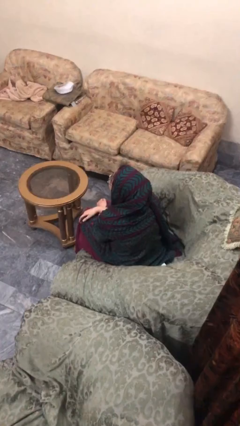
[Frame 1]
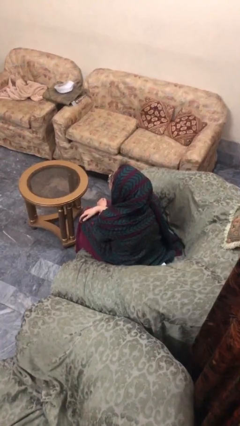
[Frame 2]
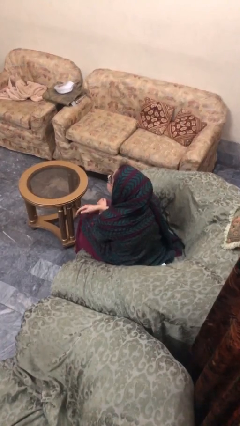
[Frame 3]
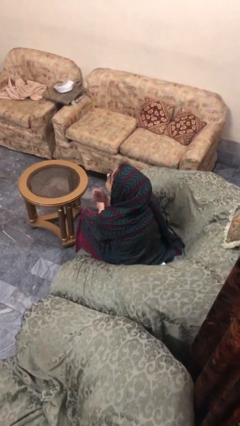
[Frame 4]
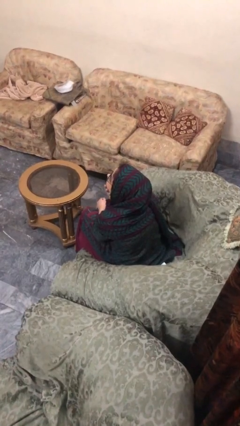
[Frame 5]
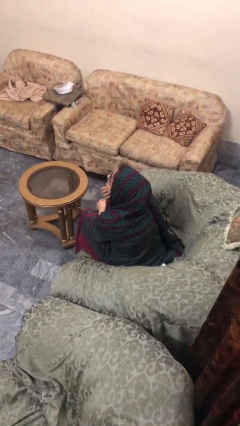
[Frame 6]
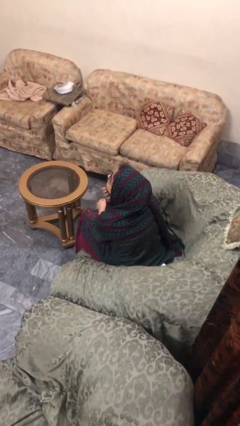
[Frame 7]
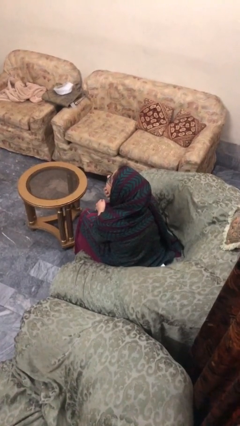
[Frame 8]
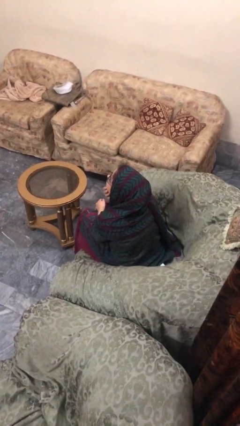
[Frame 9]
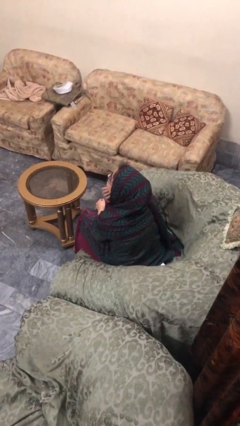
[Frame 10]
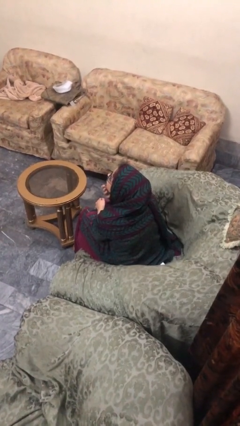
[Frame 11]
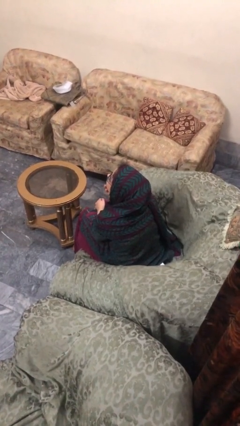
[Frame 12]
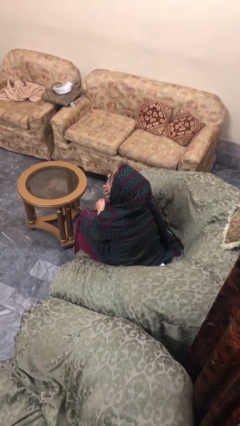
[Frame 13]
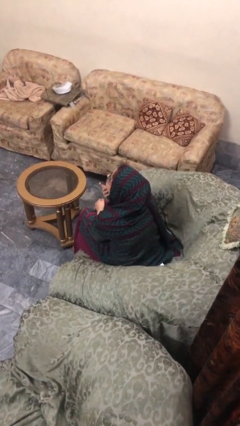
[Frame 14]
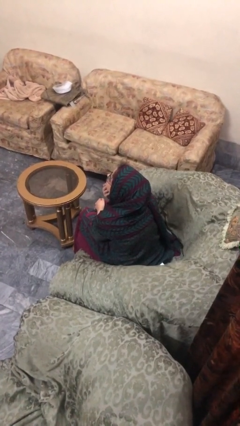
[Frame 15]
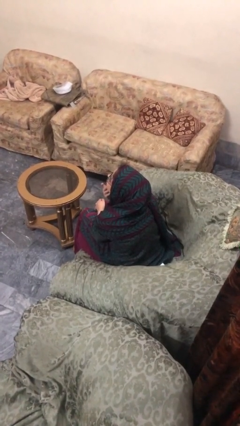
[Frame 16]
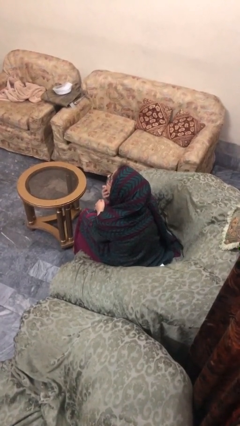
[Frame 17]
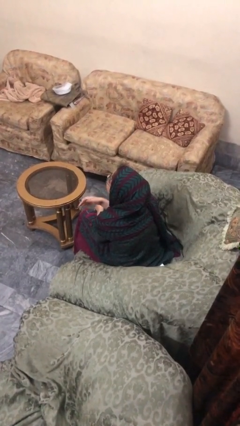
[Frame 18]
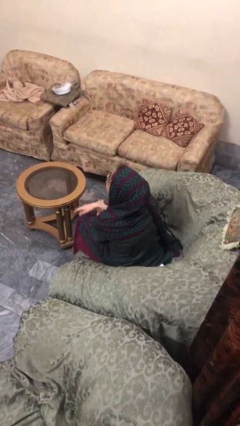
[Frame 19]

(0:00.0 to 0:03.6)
person strokes chin

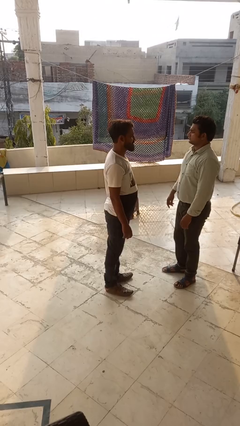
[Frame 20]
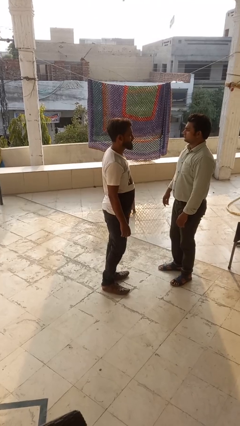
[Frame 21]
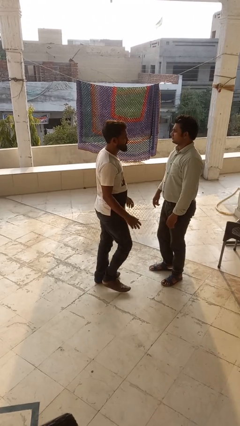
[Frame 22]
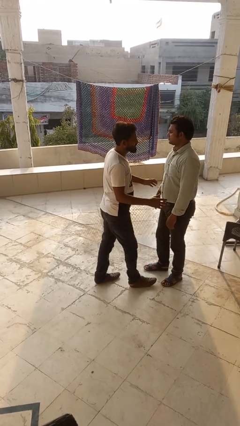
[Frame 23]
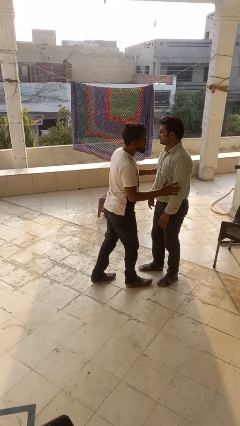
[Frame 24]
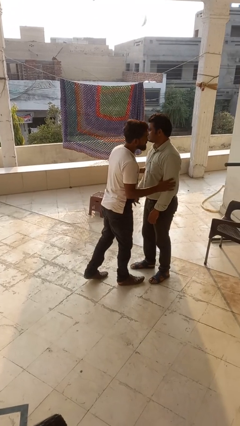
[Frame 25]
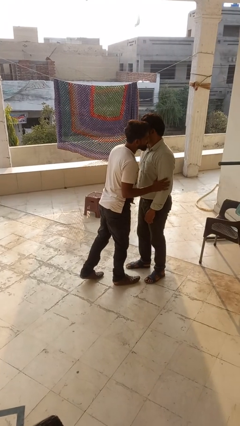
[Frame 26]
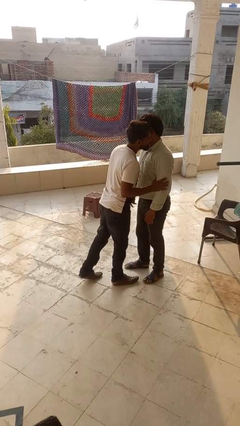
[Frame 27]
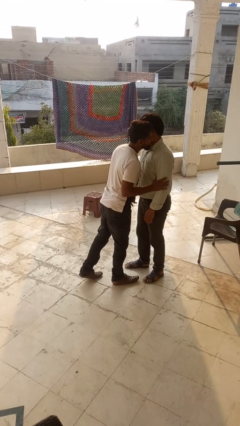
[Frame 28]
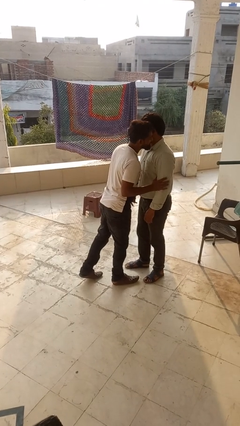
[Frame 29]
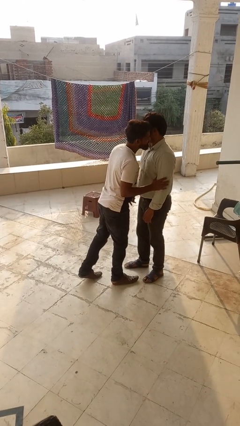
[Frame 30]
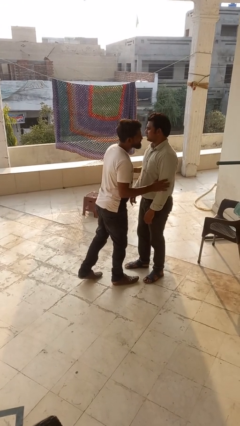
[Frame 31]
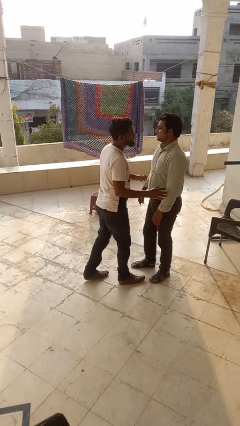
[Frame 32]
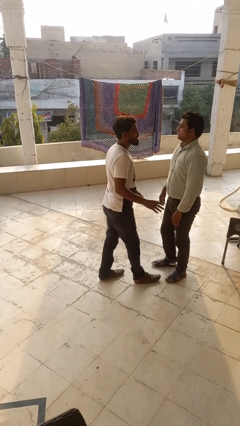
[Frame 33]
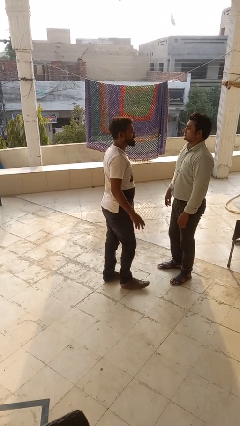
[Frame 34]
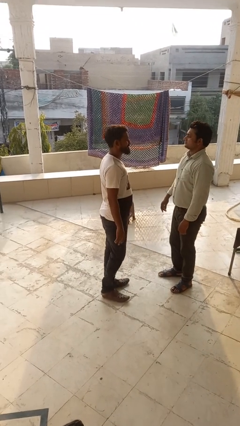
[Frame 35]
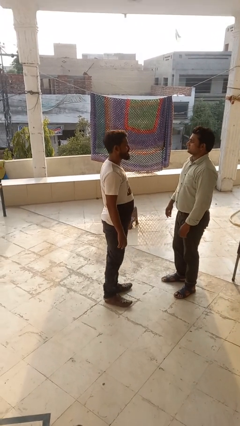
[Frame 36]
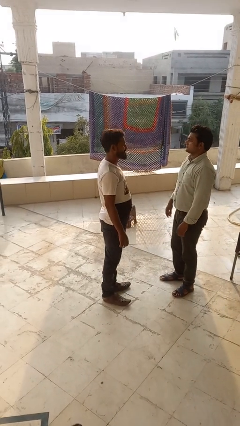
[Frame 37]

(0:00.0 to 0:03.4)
person kisses cheek of person

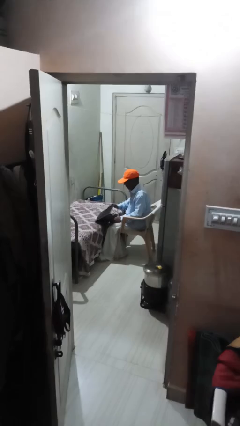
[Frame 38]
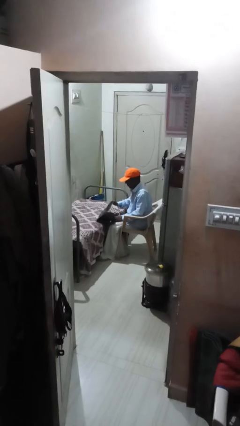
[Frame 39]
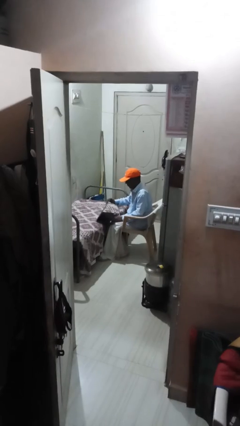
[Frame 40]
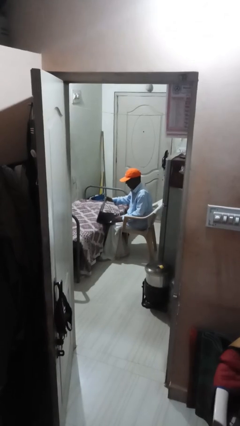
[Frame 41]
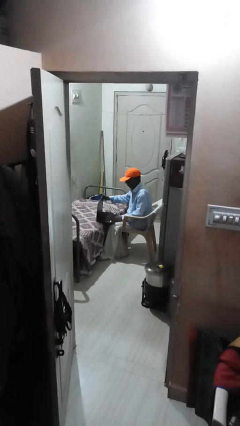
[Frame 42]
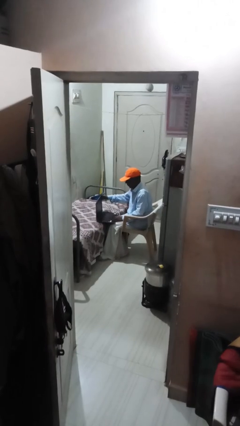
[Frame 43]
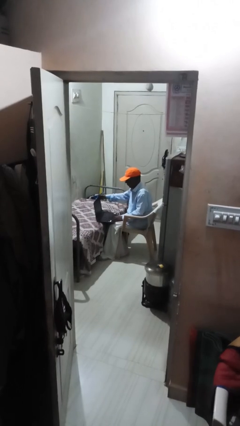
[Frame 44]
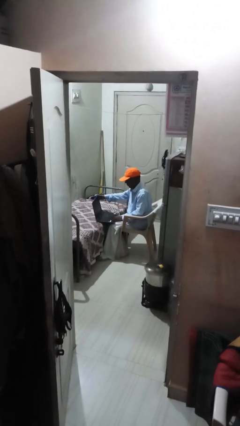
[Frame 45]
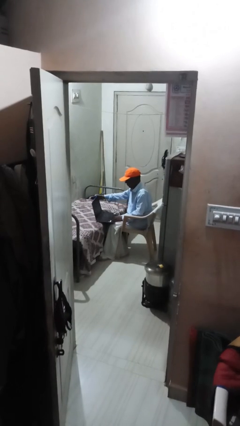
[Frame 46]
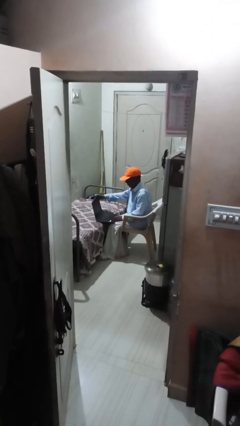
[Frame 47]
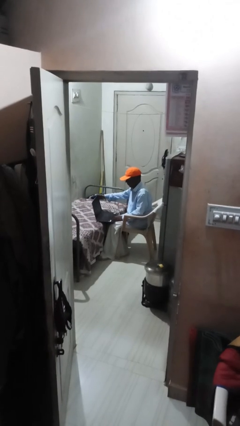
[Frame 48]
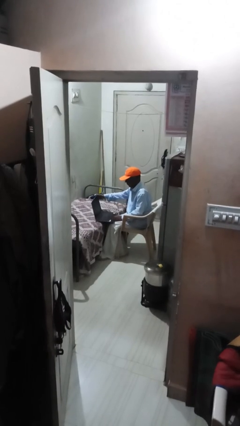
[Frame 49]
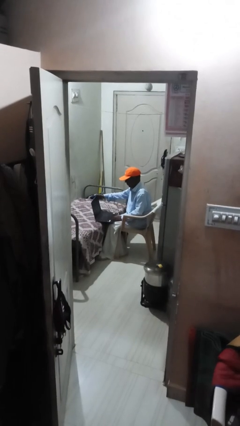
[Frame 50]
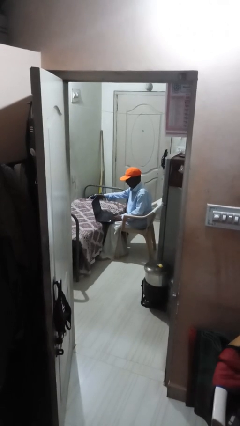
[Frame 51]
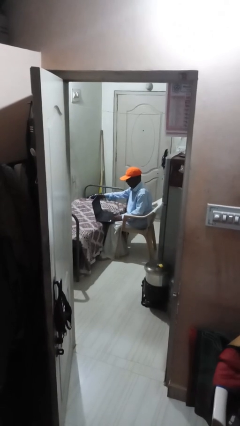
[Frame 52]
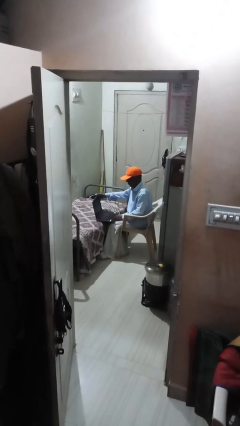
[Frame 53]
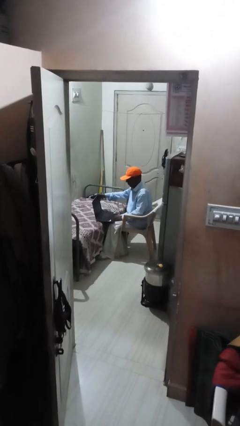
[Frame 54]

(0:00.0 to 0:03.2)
person interacts with laptop

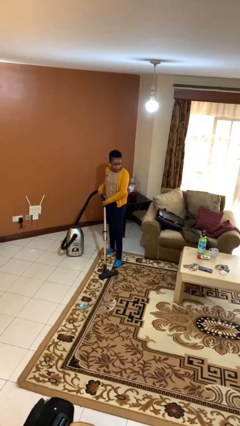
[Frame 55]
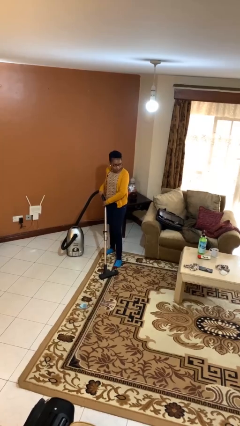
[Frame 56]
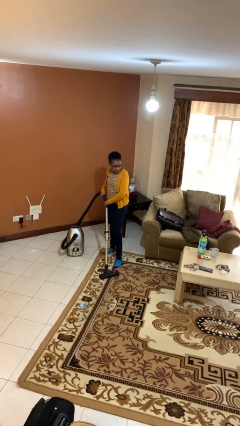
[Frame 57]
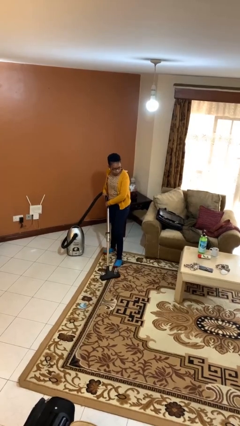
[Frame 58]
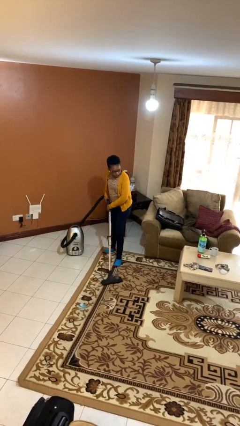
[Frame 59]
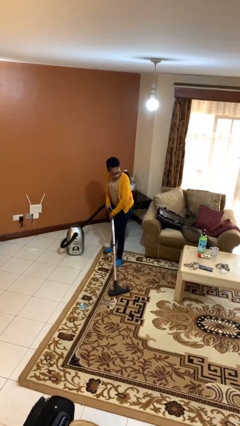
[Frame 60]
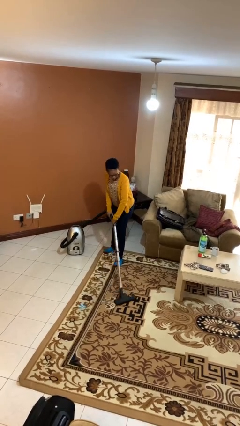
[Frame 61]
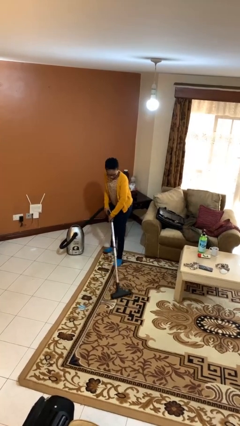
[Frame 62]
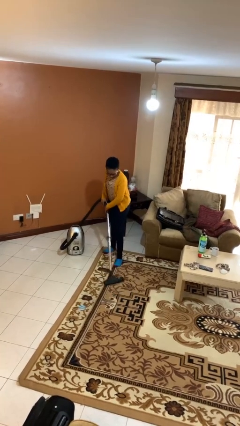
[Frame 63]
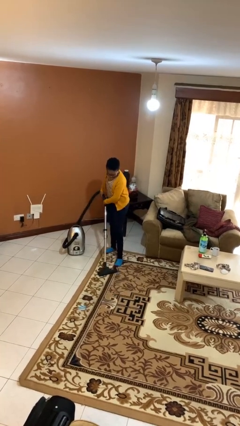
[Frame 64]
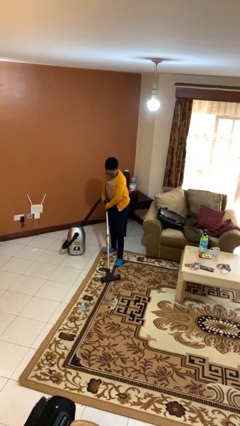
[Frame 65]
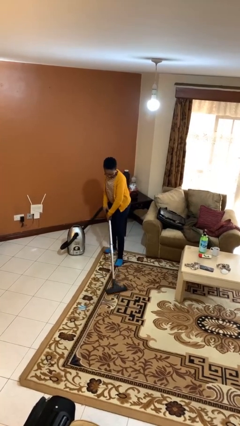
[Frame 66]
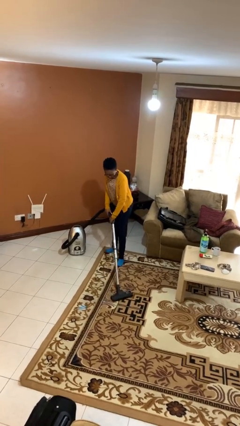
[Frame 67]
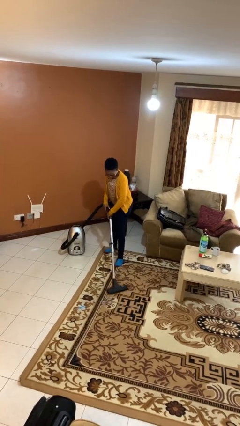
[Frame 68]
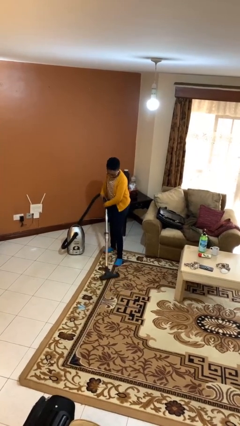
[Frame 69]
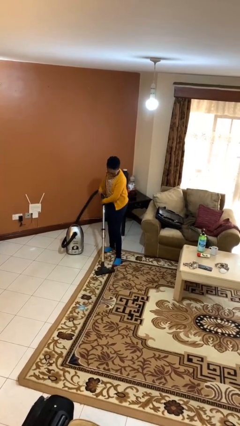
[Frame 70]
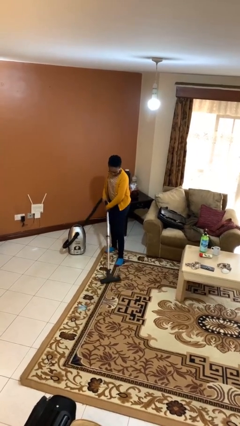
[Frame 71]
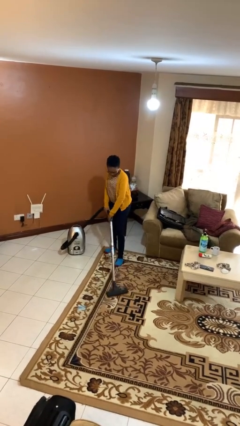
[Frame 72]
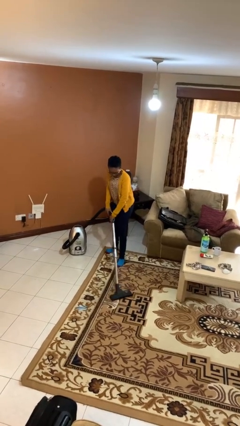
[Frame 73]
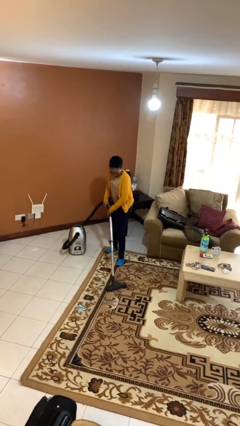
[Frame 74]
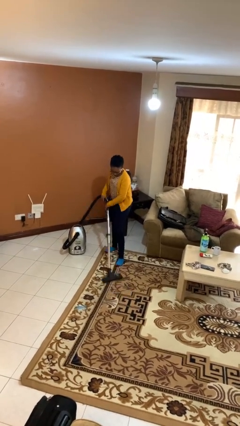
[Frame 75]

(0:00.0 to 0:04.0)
person vacuums carpet

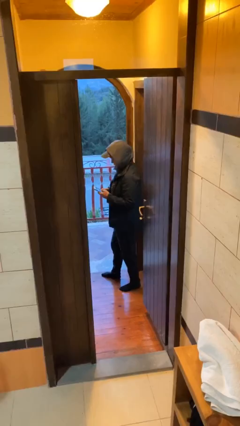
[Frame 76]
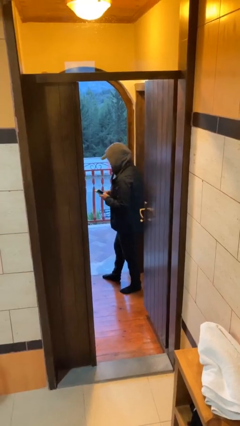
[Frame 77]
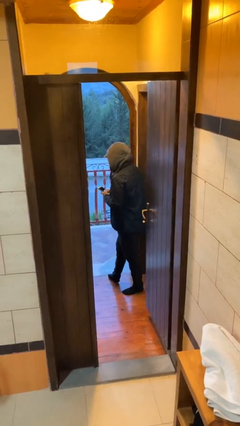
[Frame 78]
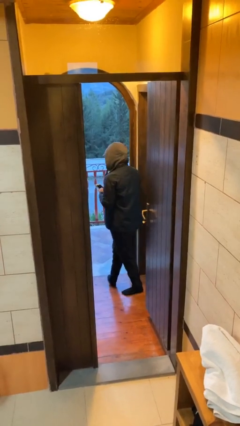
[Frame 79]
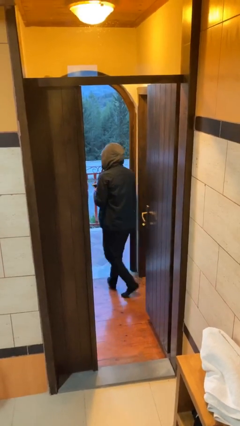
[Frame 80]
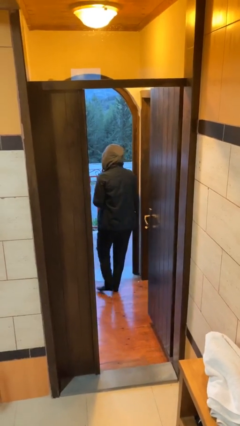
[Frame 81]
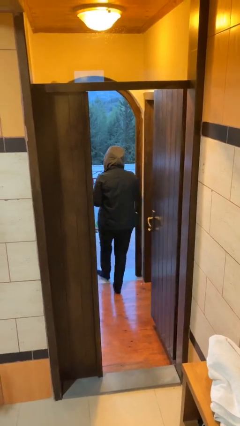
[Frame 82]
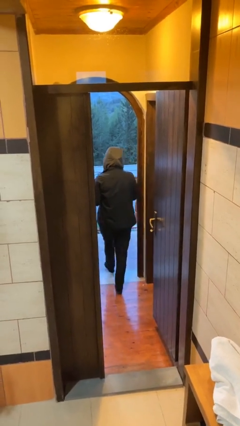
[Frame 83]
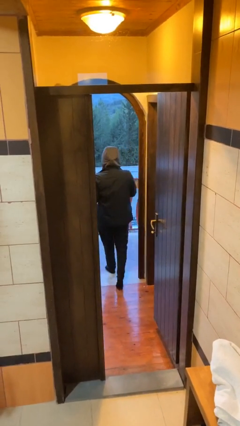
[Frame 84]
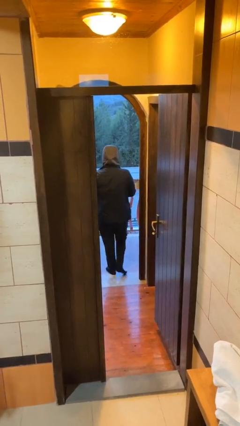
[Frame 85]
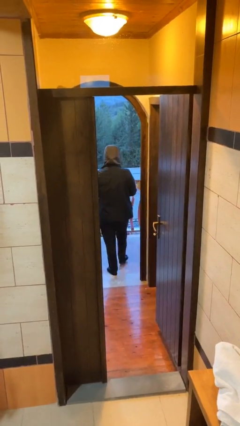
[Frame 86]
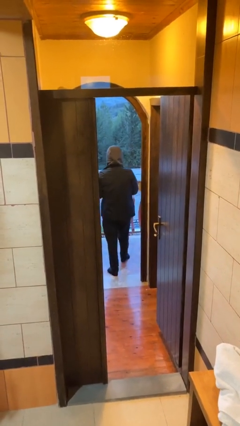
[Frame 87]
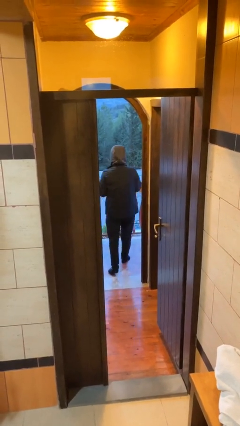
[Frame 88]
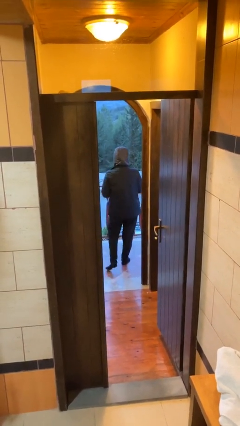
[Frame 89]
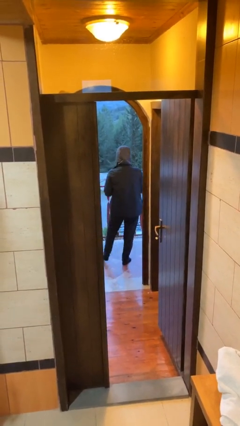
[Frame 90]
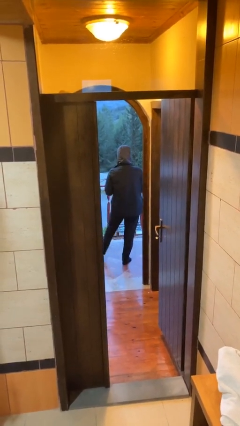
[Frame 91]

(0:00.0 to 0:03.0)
person exits scene through structure

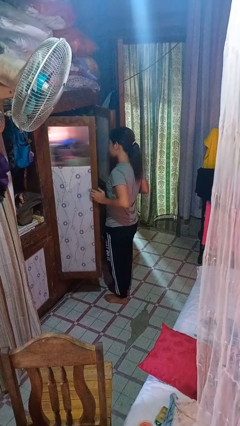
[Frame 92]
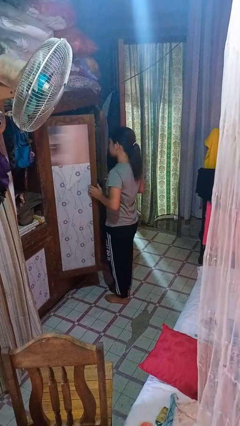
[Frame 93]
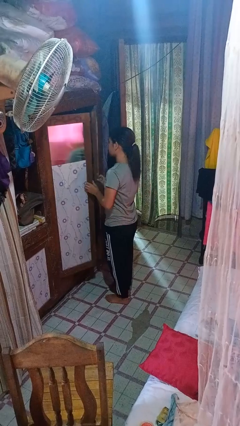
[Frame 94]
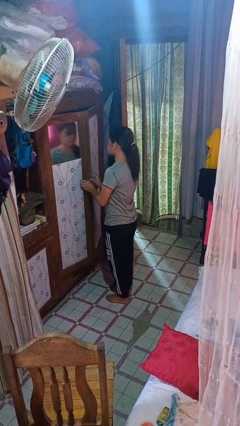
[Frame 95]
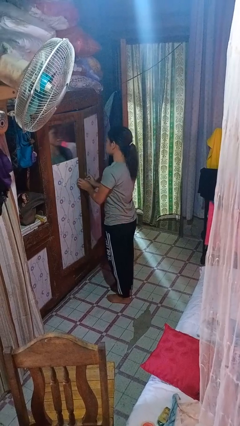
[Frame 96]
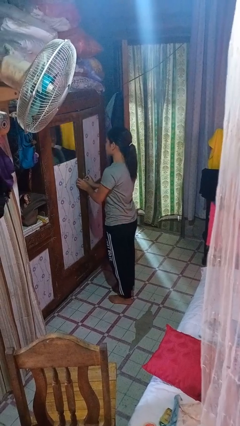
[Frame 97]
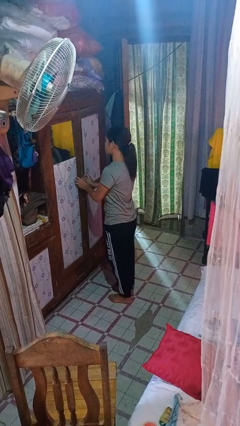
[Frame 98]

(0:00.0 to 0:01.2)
person closes closet door
